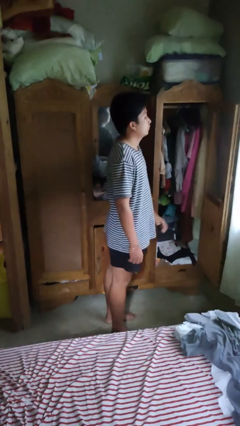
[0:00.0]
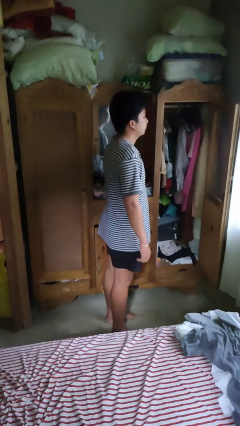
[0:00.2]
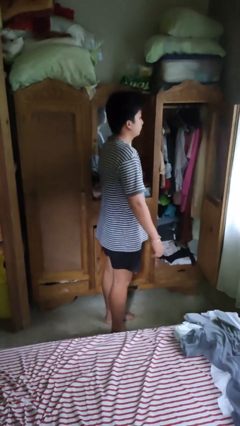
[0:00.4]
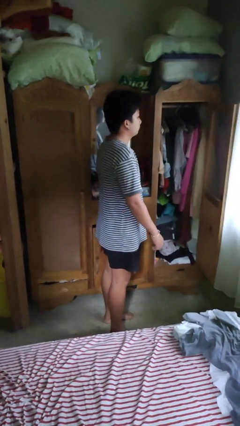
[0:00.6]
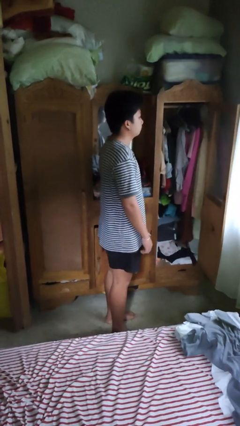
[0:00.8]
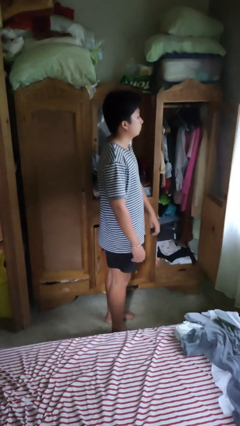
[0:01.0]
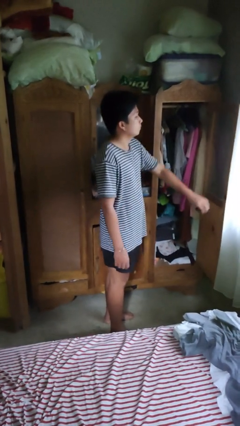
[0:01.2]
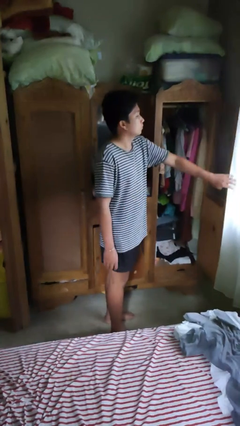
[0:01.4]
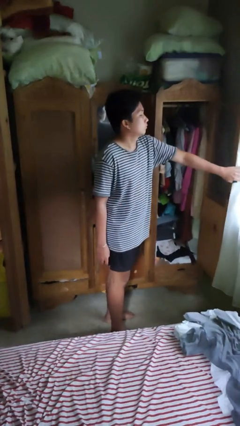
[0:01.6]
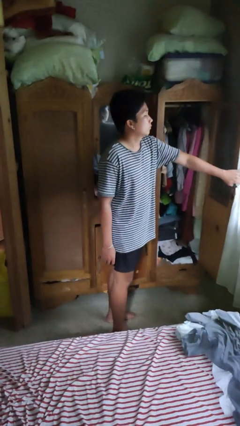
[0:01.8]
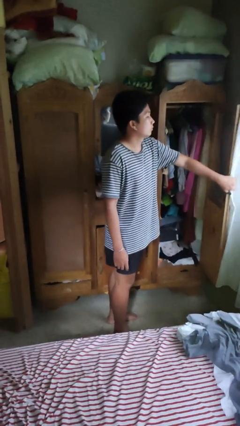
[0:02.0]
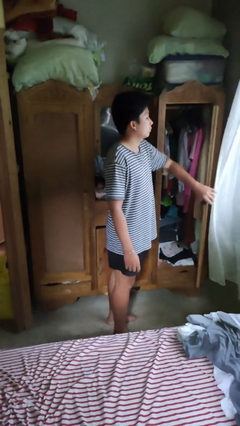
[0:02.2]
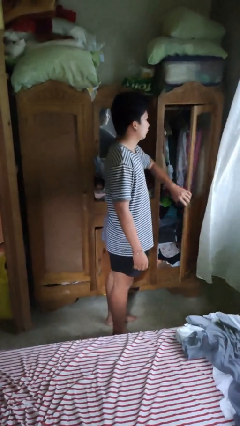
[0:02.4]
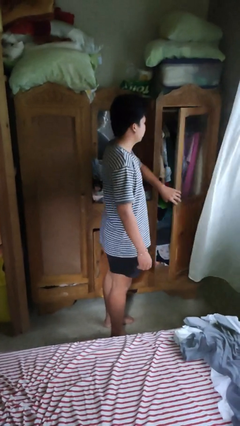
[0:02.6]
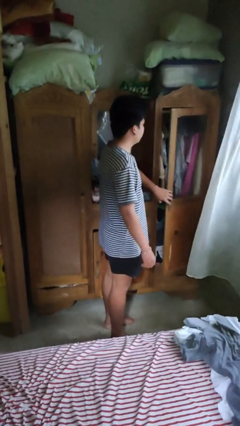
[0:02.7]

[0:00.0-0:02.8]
person closes closet door

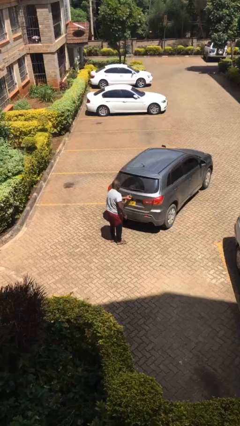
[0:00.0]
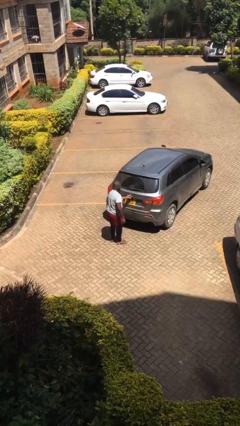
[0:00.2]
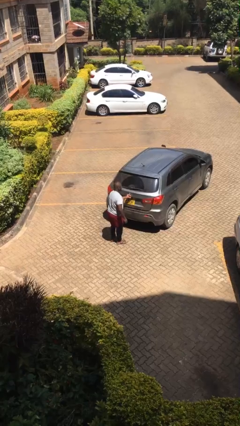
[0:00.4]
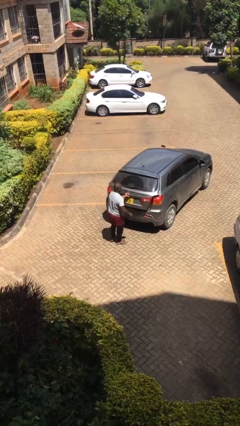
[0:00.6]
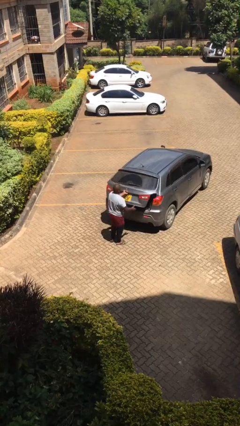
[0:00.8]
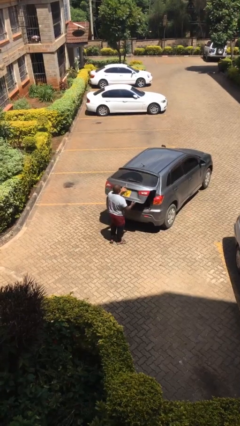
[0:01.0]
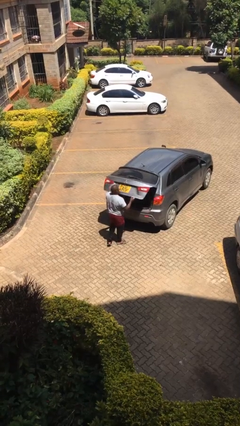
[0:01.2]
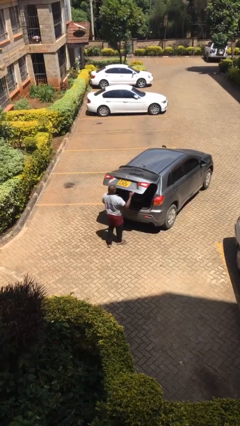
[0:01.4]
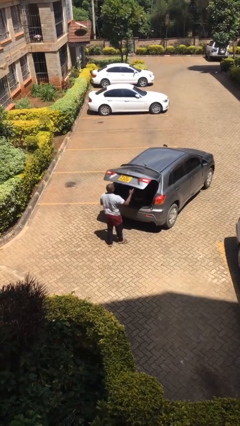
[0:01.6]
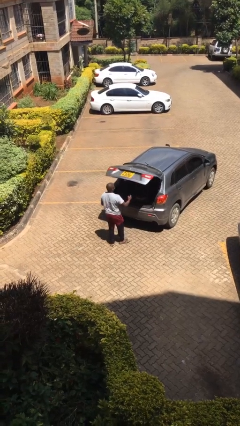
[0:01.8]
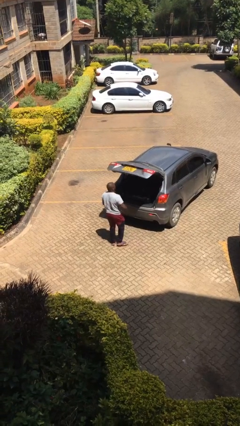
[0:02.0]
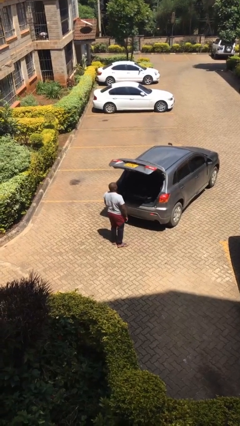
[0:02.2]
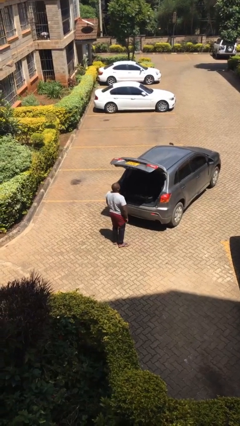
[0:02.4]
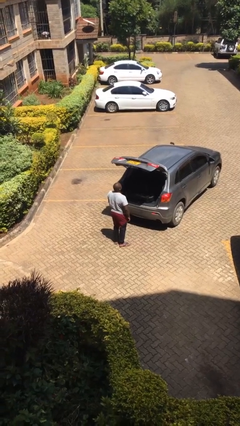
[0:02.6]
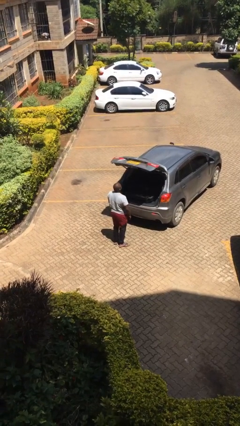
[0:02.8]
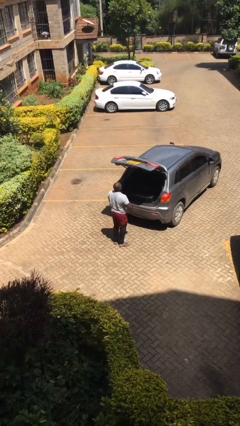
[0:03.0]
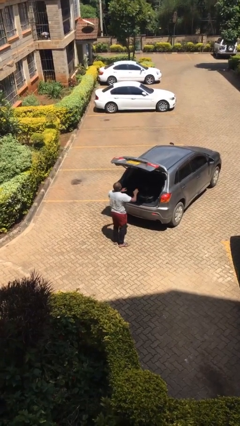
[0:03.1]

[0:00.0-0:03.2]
person opens car trunk

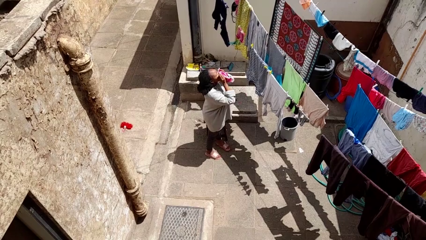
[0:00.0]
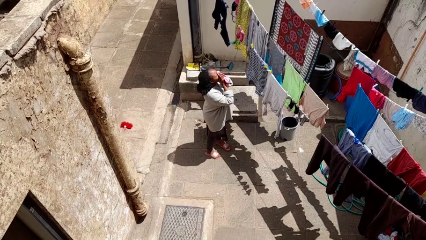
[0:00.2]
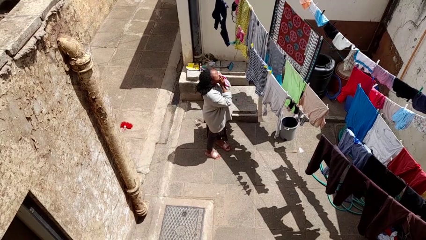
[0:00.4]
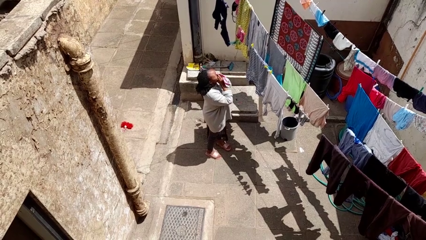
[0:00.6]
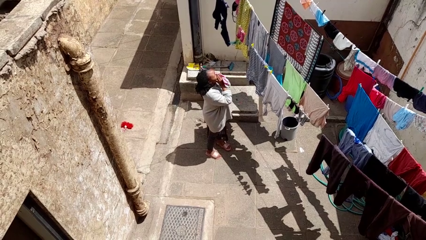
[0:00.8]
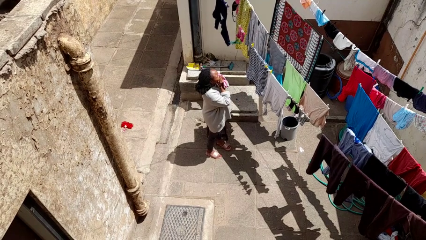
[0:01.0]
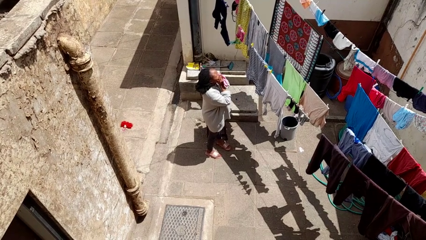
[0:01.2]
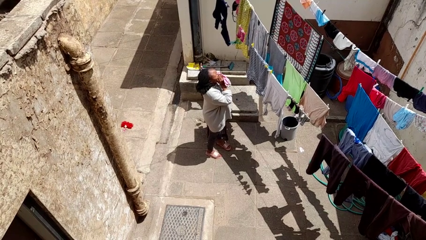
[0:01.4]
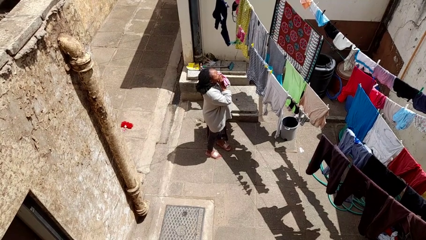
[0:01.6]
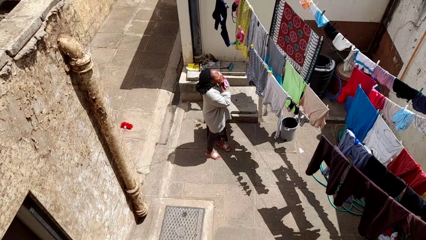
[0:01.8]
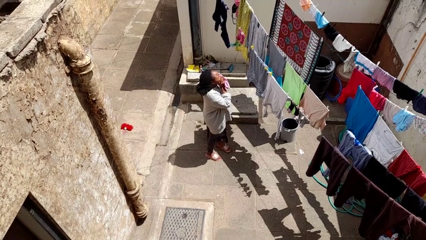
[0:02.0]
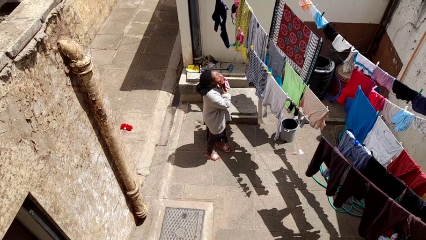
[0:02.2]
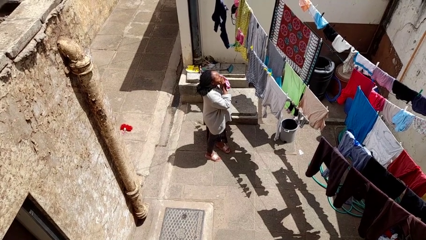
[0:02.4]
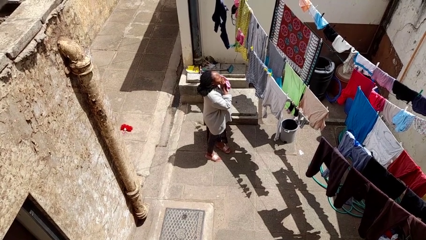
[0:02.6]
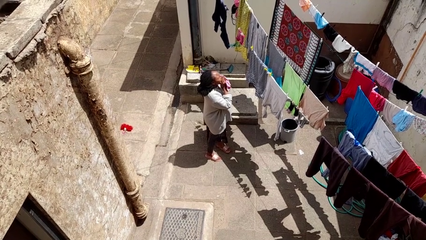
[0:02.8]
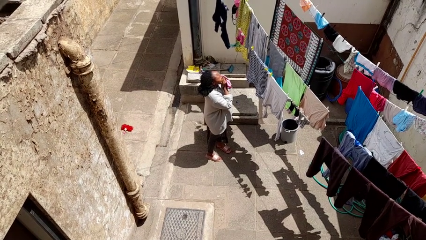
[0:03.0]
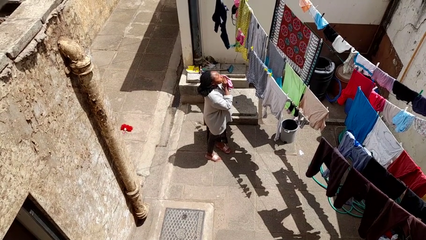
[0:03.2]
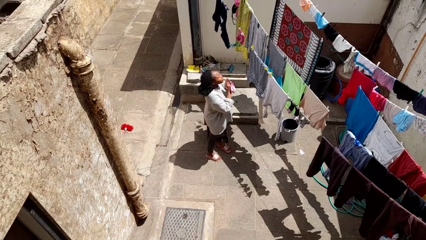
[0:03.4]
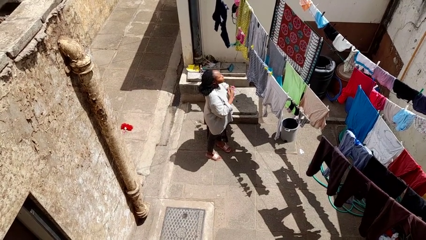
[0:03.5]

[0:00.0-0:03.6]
person blows nose

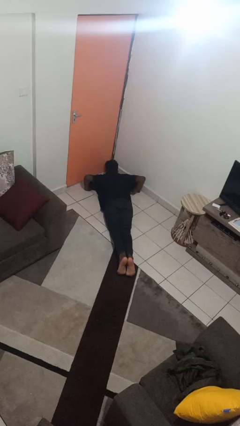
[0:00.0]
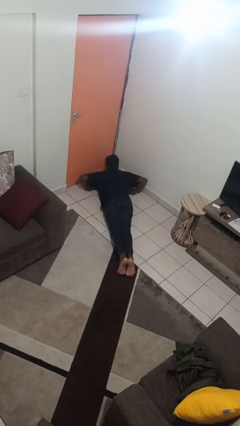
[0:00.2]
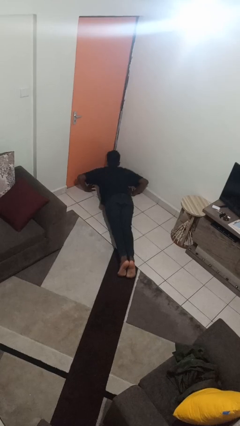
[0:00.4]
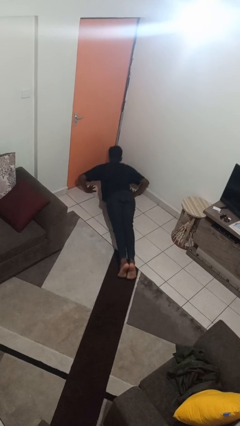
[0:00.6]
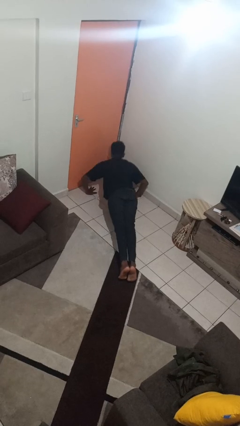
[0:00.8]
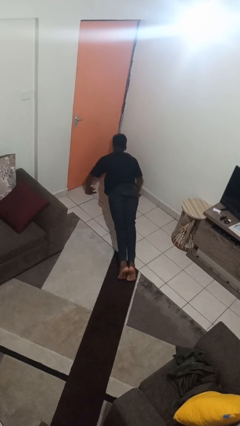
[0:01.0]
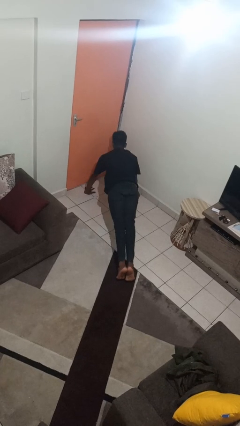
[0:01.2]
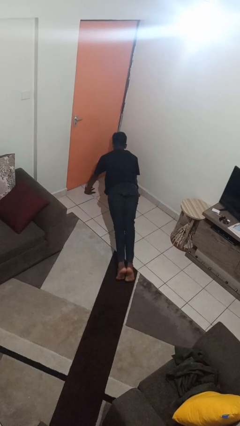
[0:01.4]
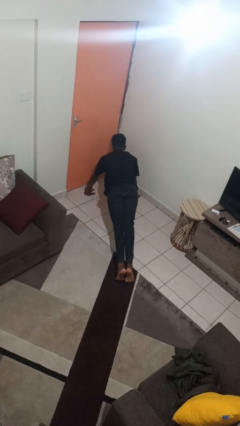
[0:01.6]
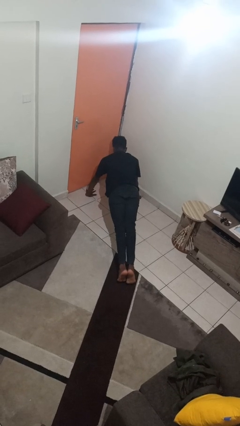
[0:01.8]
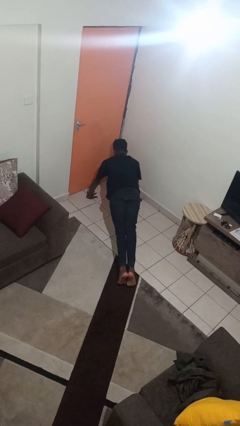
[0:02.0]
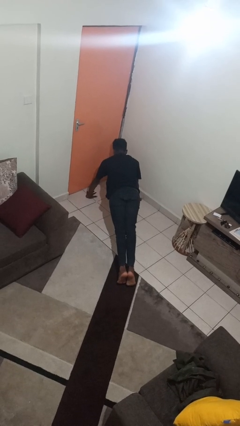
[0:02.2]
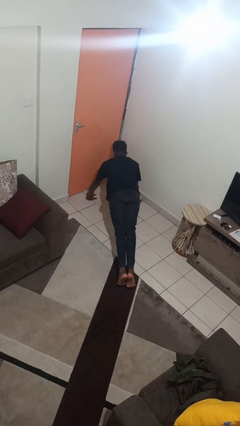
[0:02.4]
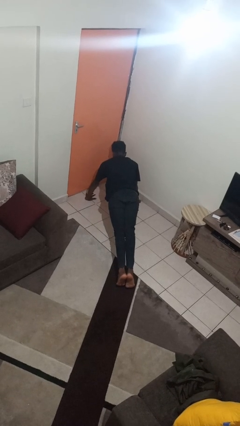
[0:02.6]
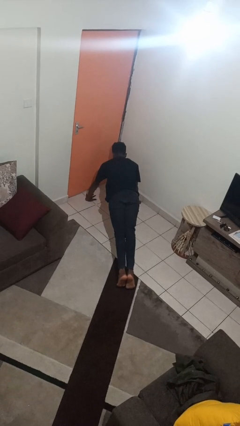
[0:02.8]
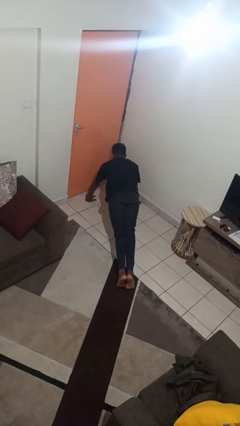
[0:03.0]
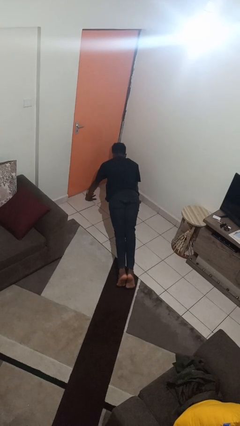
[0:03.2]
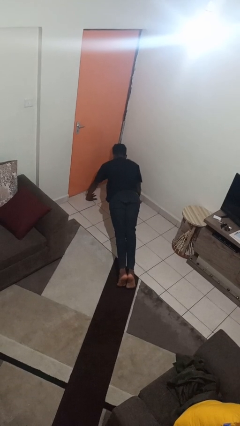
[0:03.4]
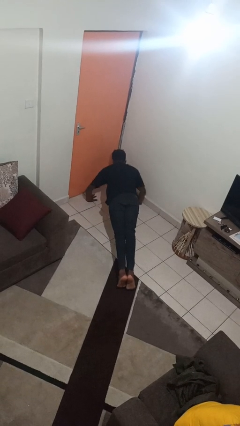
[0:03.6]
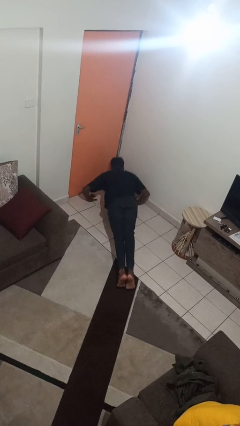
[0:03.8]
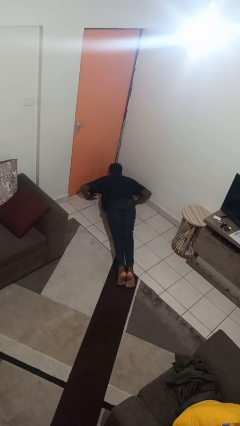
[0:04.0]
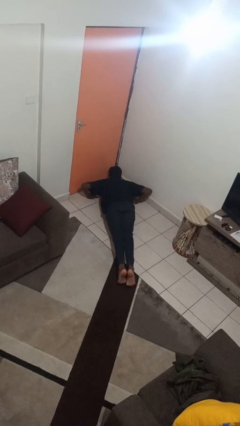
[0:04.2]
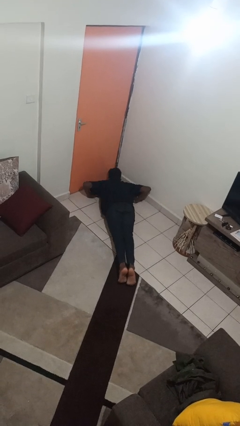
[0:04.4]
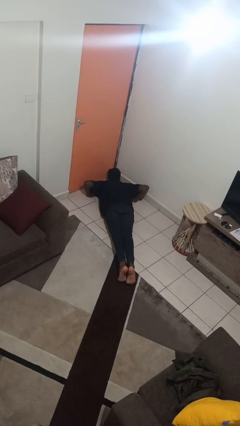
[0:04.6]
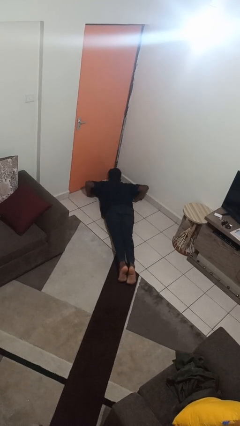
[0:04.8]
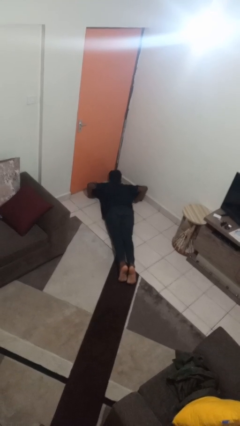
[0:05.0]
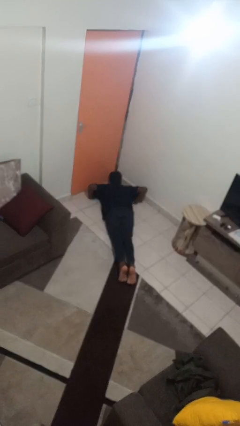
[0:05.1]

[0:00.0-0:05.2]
person exercises with pushup

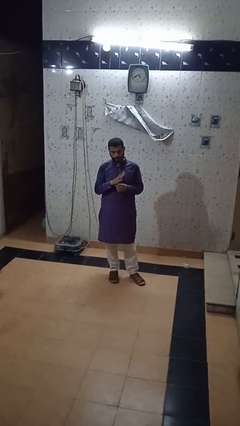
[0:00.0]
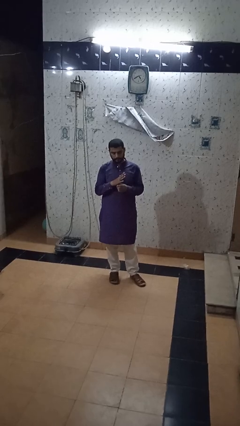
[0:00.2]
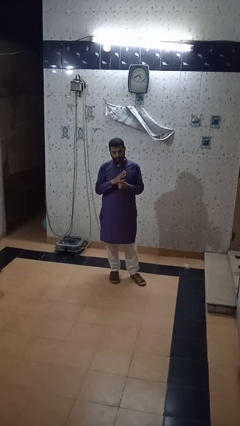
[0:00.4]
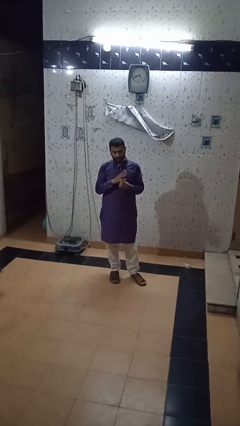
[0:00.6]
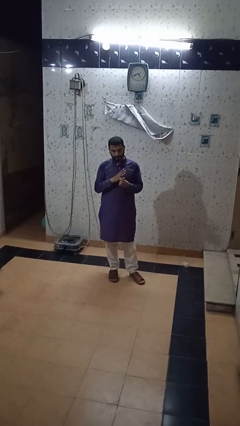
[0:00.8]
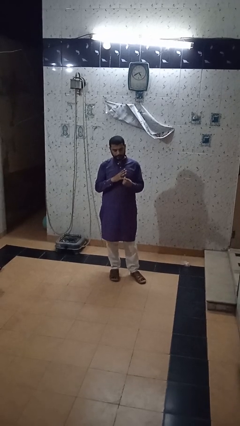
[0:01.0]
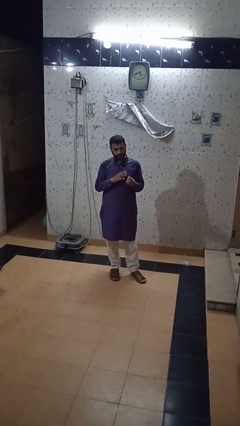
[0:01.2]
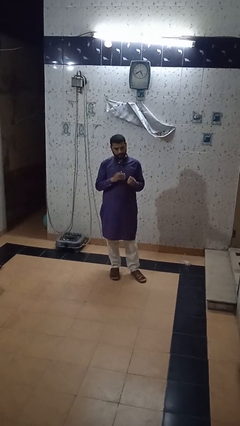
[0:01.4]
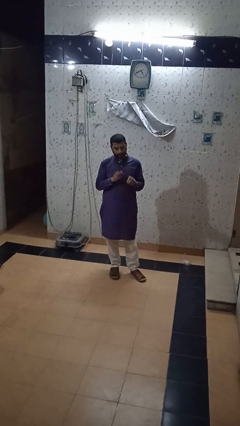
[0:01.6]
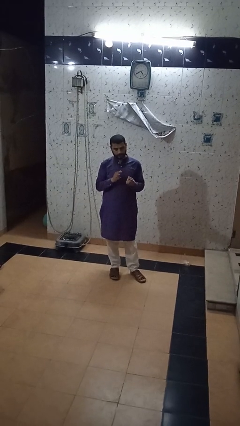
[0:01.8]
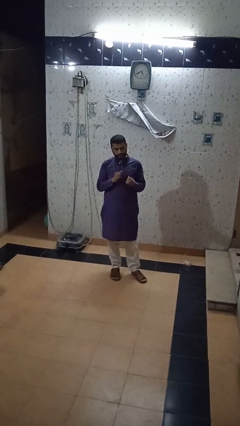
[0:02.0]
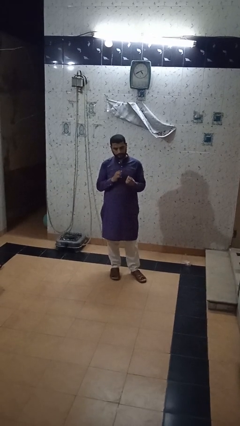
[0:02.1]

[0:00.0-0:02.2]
person takes off ring

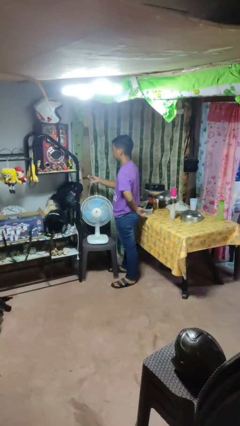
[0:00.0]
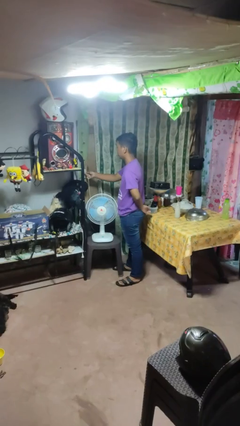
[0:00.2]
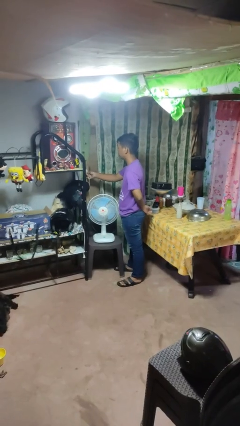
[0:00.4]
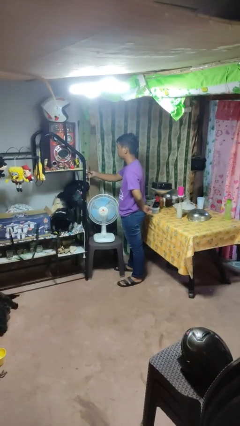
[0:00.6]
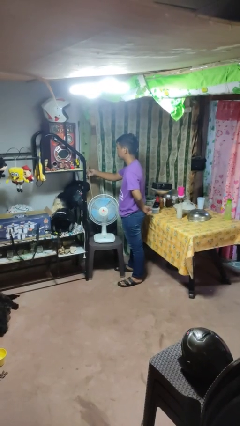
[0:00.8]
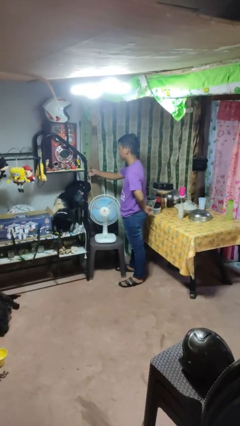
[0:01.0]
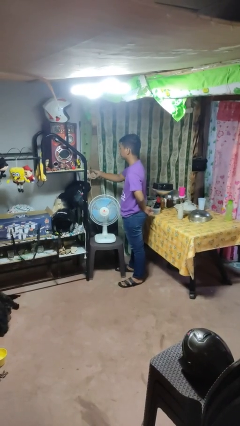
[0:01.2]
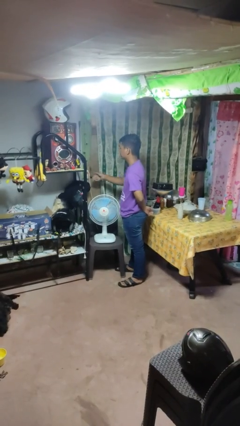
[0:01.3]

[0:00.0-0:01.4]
person plugs into electrical socket
